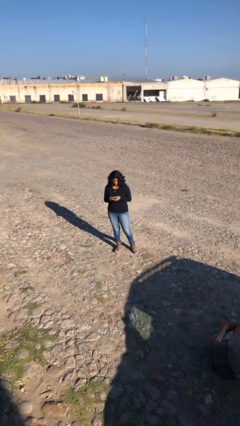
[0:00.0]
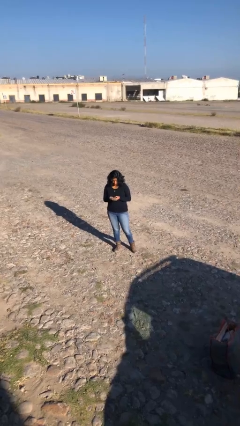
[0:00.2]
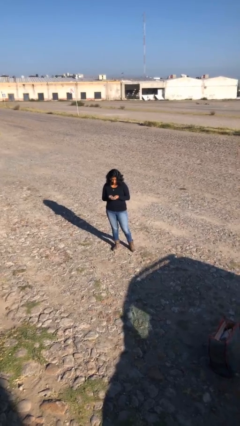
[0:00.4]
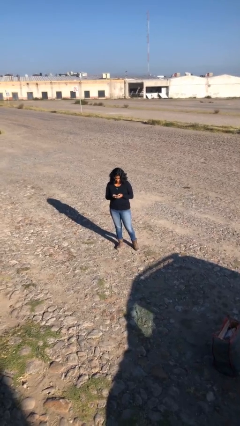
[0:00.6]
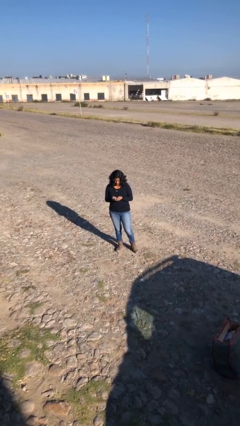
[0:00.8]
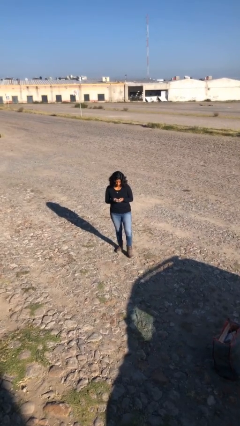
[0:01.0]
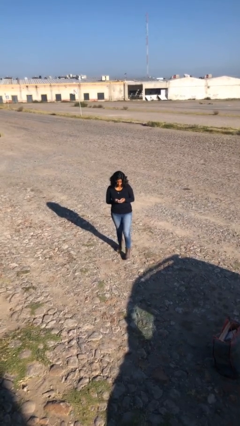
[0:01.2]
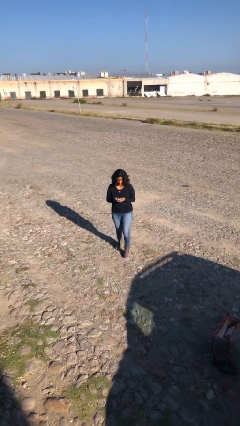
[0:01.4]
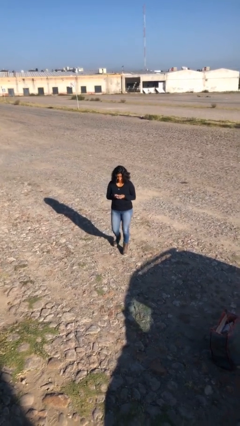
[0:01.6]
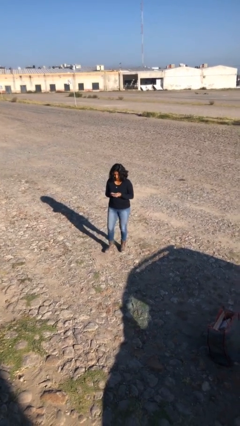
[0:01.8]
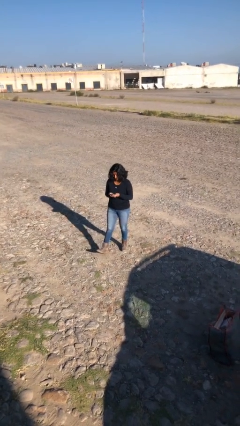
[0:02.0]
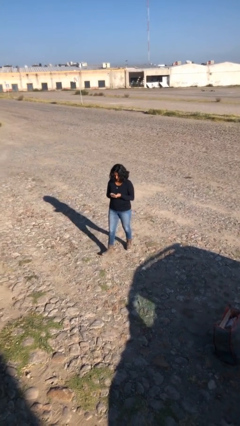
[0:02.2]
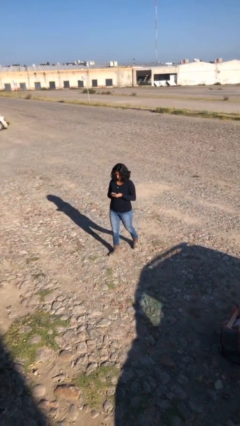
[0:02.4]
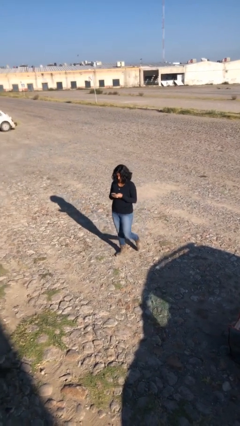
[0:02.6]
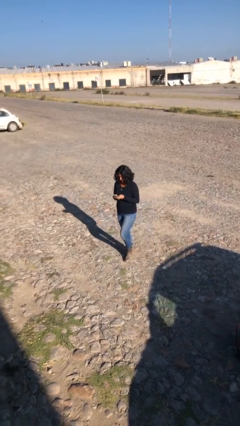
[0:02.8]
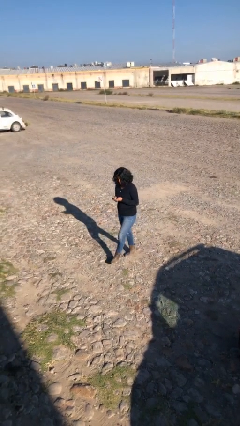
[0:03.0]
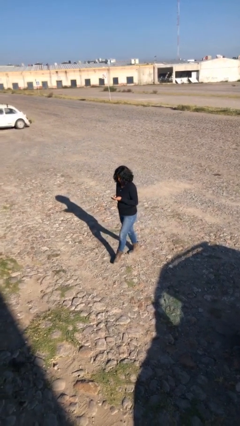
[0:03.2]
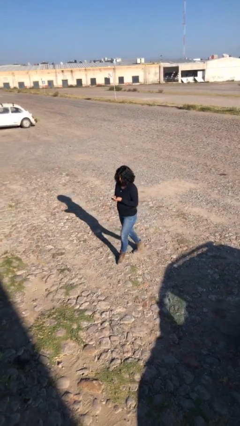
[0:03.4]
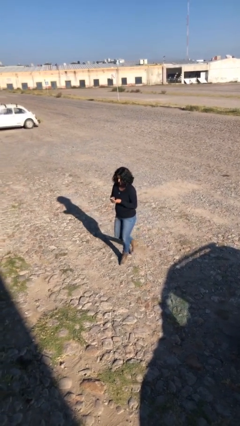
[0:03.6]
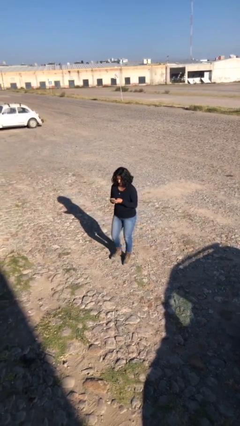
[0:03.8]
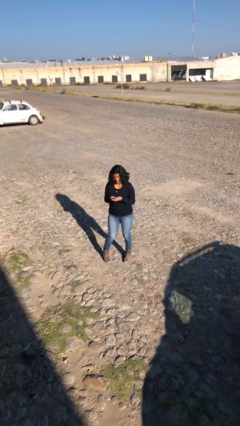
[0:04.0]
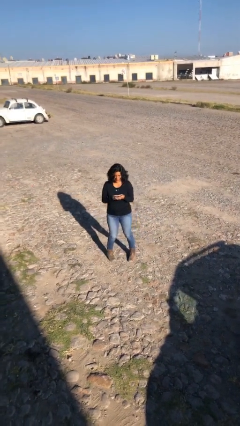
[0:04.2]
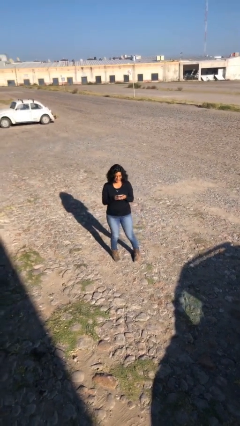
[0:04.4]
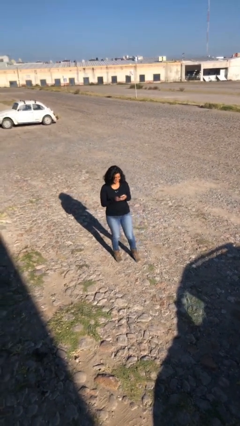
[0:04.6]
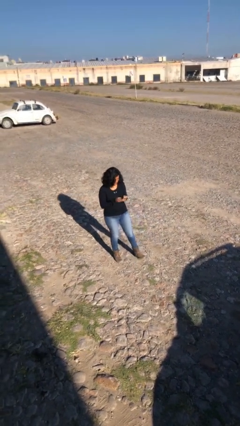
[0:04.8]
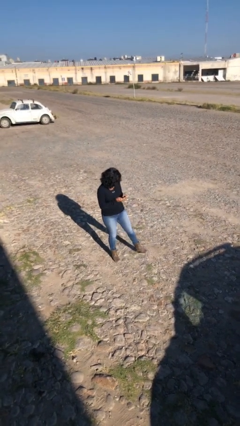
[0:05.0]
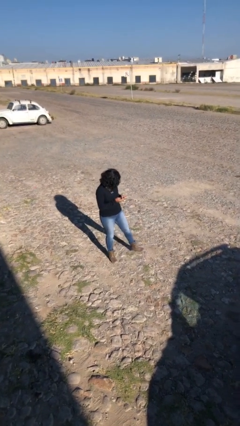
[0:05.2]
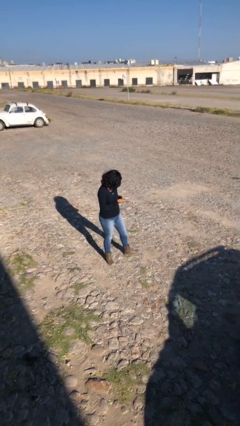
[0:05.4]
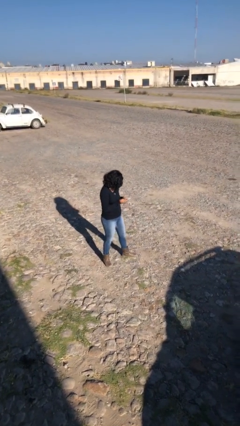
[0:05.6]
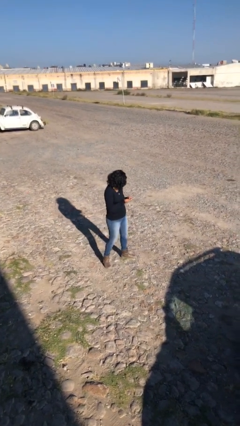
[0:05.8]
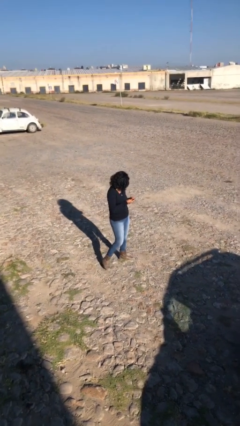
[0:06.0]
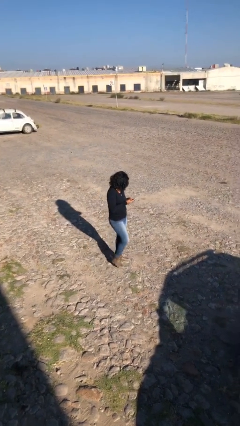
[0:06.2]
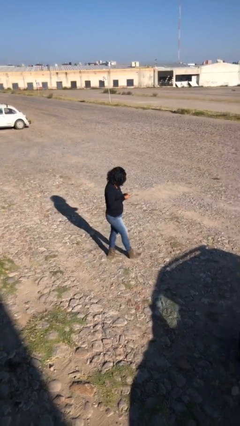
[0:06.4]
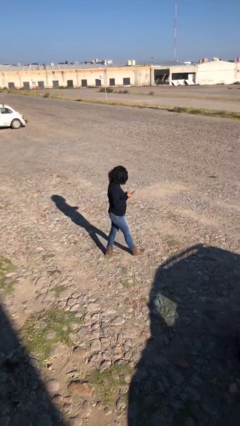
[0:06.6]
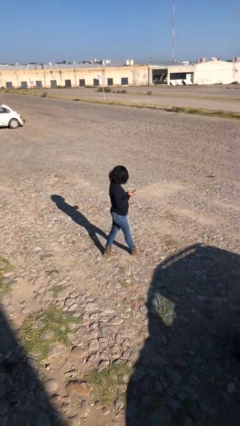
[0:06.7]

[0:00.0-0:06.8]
person texts on phone

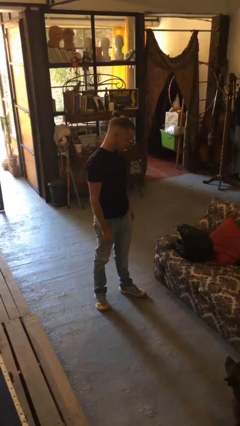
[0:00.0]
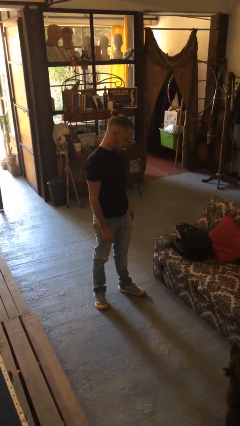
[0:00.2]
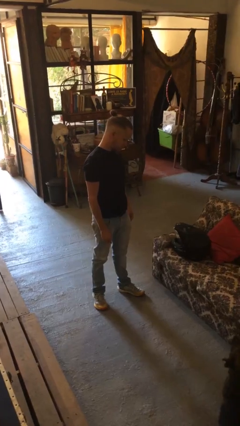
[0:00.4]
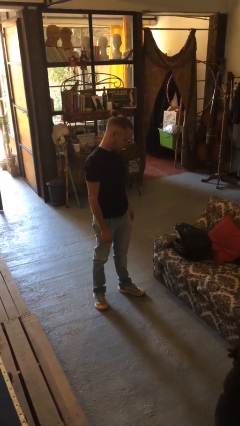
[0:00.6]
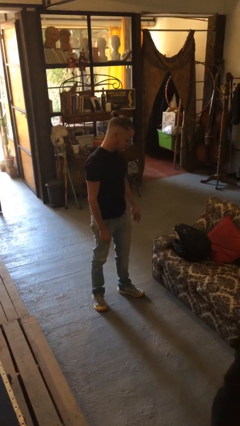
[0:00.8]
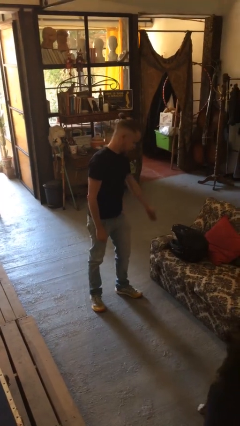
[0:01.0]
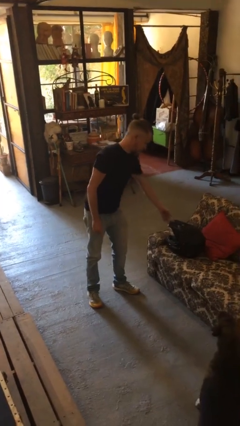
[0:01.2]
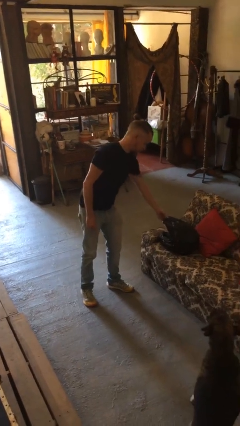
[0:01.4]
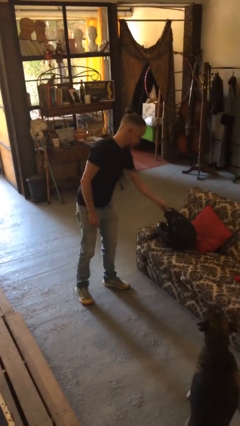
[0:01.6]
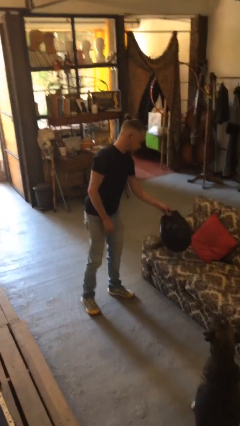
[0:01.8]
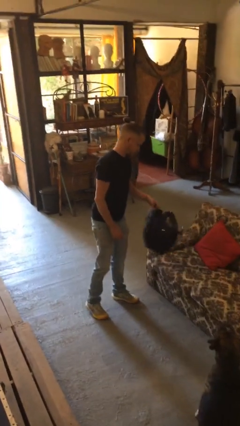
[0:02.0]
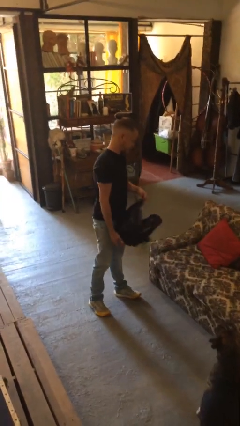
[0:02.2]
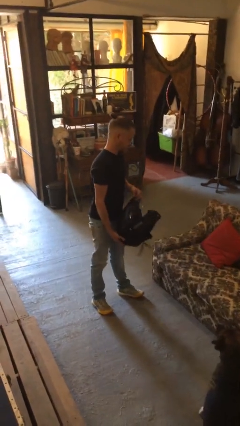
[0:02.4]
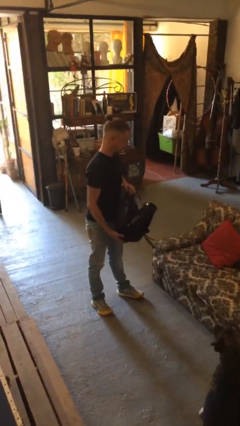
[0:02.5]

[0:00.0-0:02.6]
person picks up object from couch

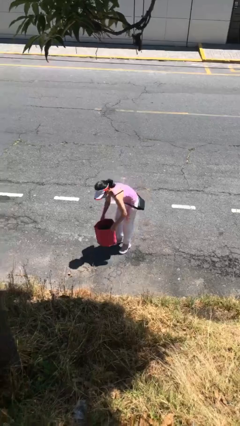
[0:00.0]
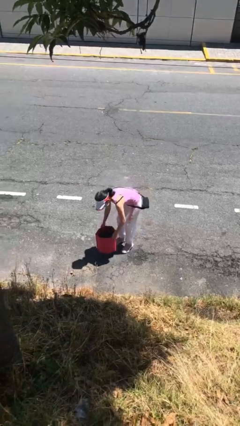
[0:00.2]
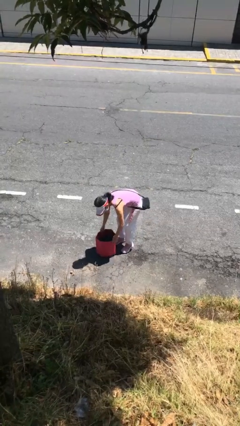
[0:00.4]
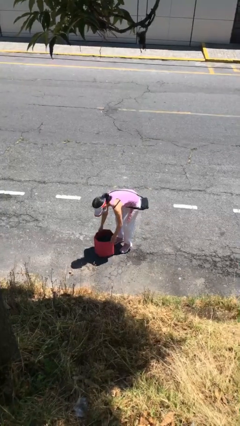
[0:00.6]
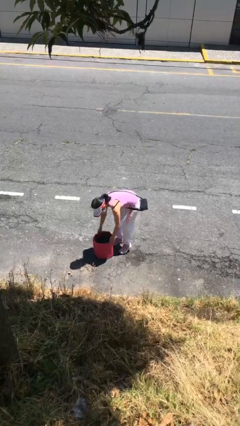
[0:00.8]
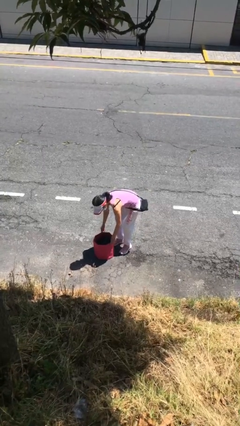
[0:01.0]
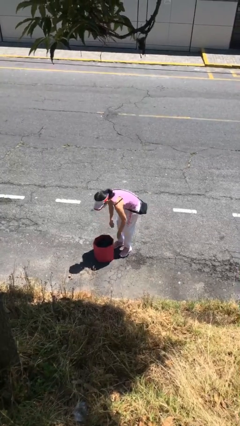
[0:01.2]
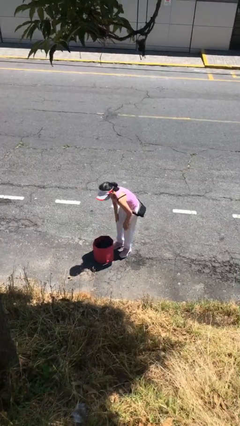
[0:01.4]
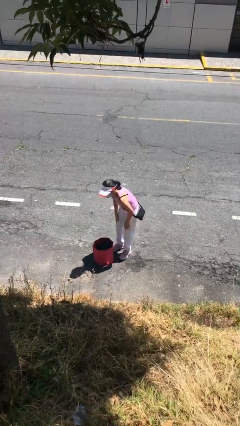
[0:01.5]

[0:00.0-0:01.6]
person puts down object on floor

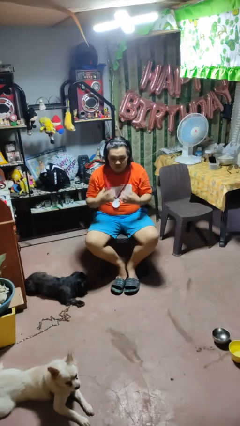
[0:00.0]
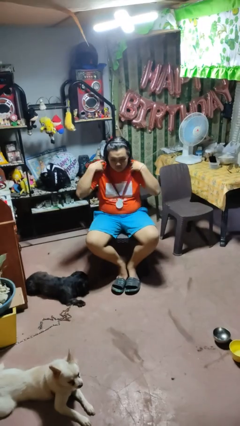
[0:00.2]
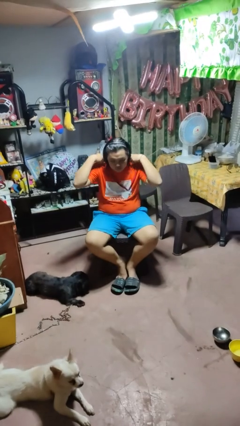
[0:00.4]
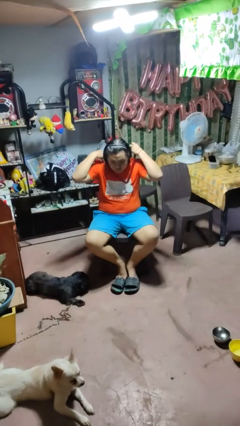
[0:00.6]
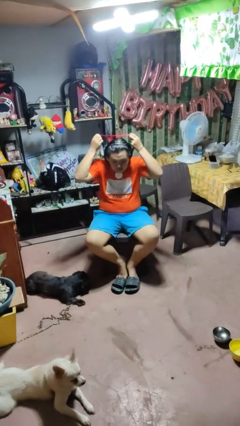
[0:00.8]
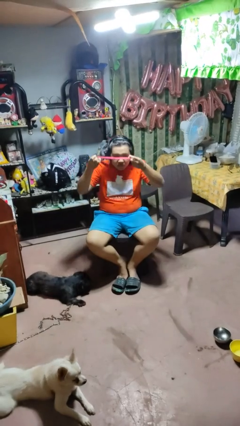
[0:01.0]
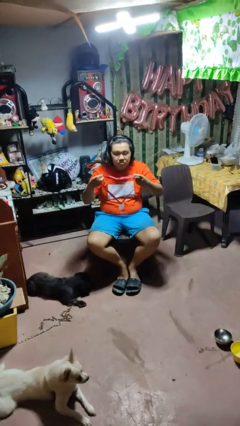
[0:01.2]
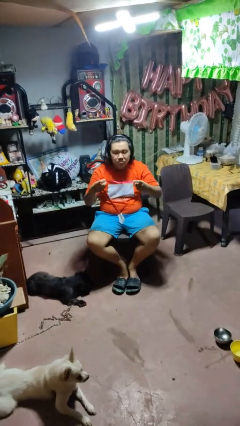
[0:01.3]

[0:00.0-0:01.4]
person takes off necklace

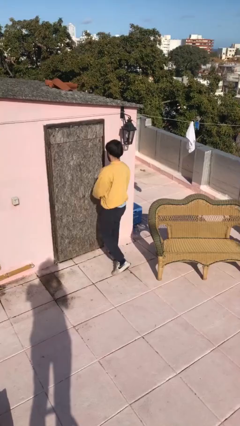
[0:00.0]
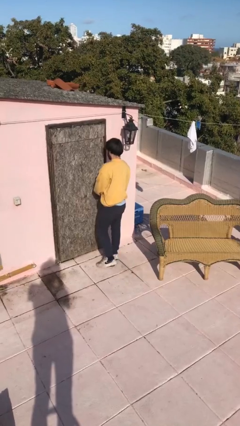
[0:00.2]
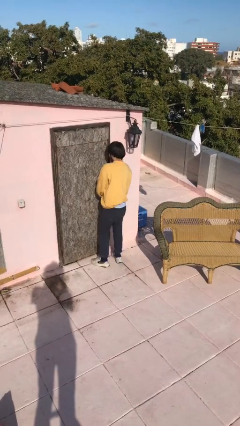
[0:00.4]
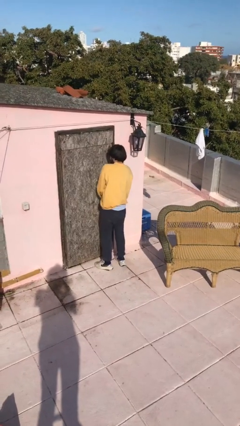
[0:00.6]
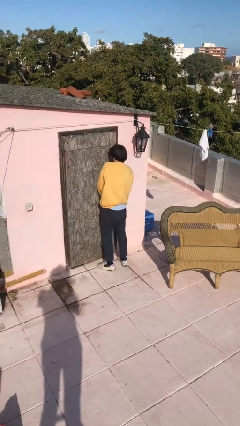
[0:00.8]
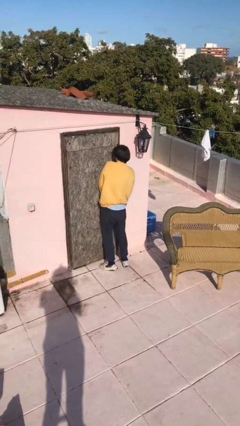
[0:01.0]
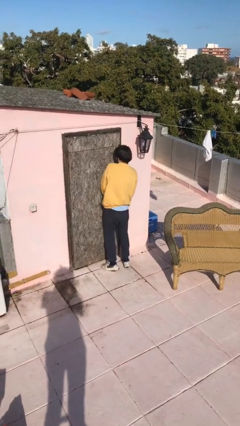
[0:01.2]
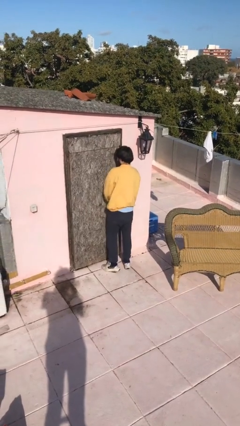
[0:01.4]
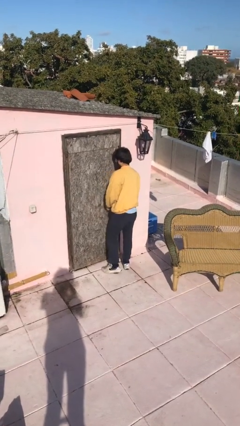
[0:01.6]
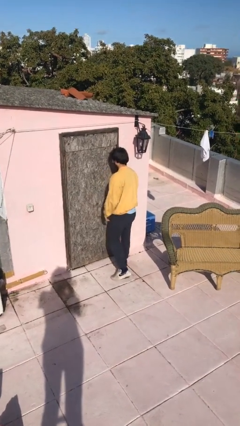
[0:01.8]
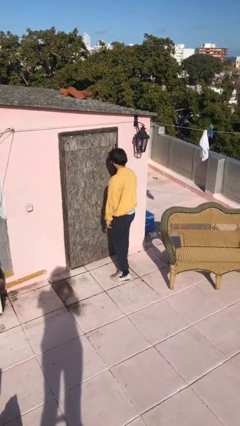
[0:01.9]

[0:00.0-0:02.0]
person locks door with keys

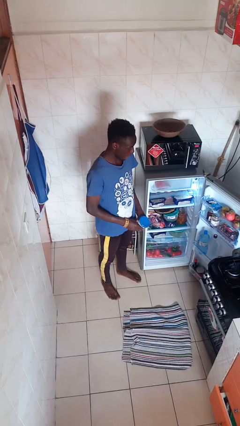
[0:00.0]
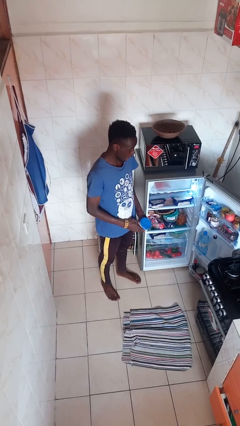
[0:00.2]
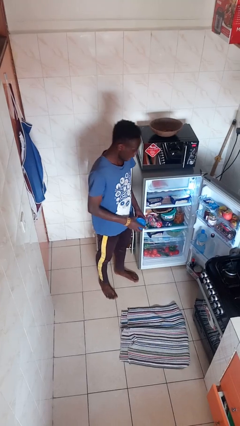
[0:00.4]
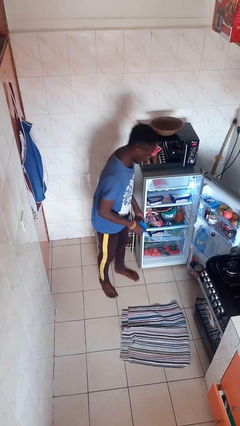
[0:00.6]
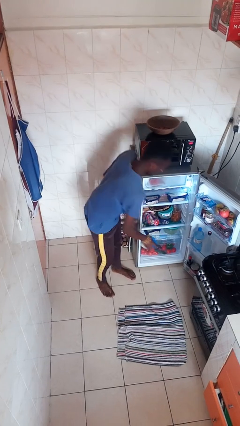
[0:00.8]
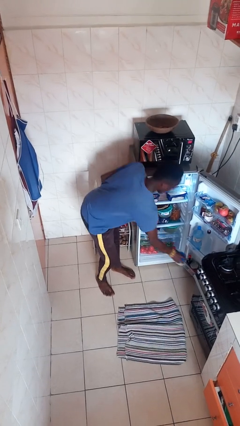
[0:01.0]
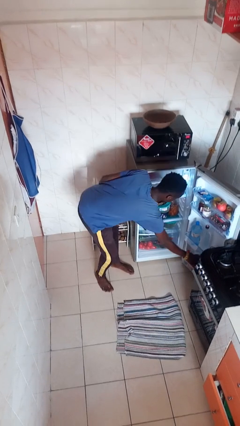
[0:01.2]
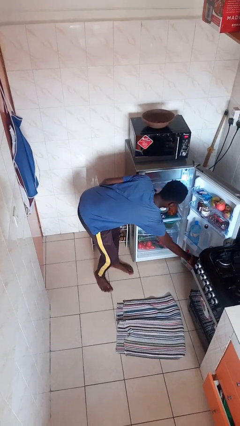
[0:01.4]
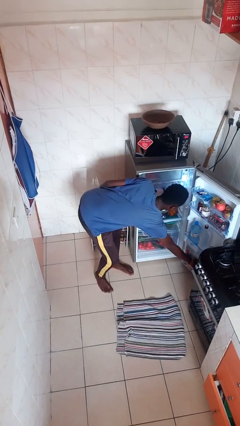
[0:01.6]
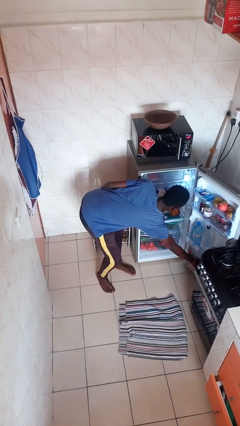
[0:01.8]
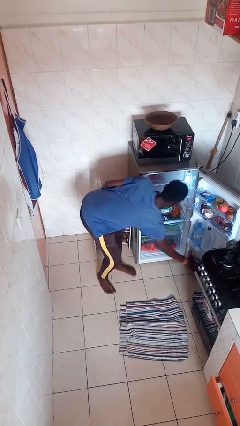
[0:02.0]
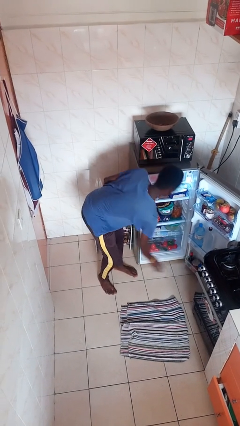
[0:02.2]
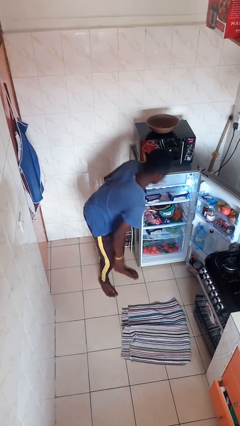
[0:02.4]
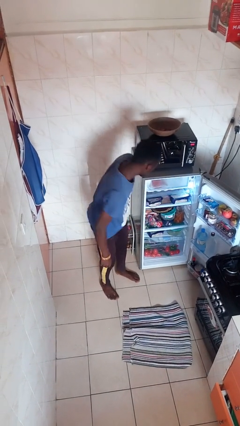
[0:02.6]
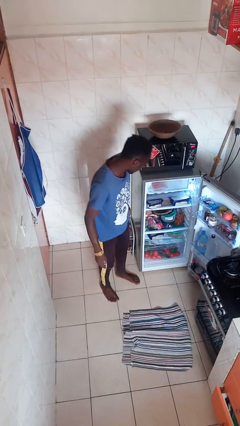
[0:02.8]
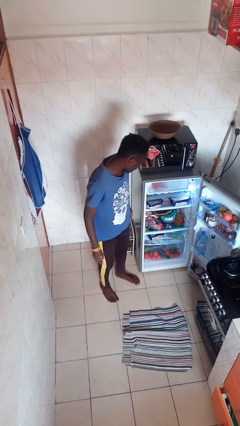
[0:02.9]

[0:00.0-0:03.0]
person puts object into refrigerator
